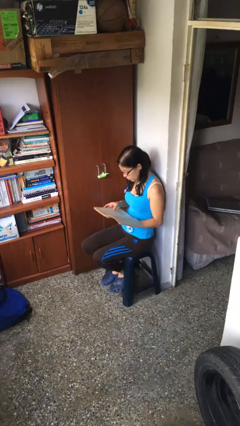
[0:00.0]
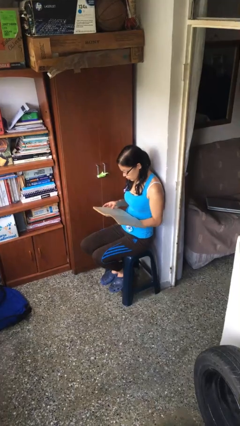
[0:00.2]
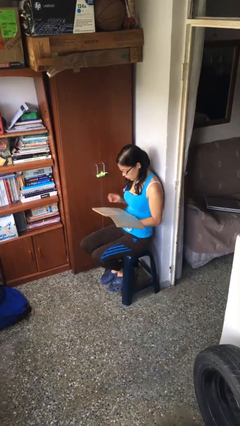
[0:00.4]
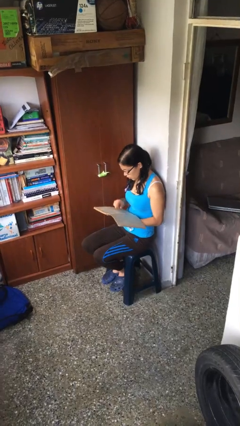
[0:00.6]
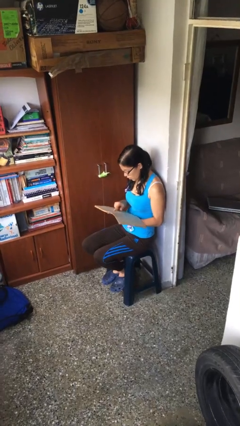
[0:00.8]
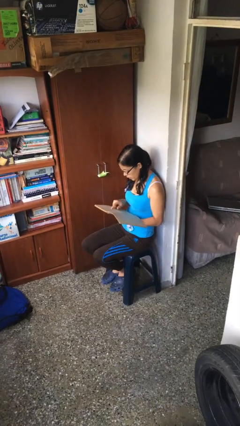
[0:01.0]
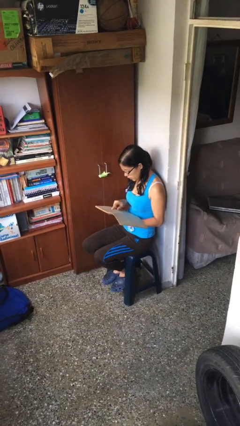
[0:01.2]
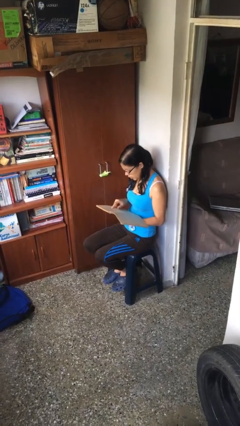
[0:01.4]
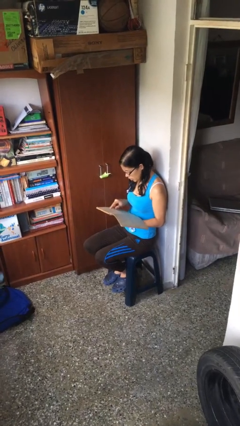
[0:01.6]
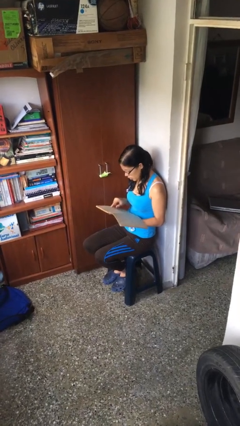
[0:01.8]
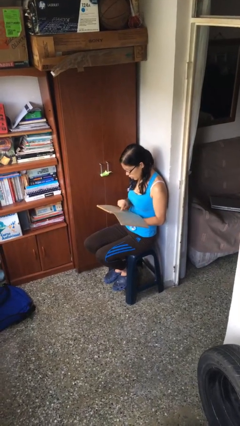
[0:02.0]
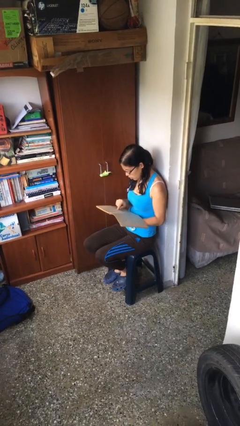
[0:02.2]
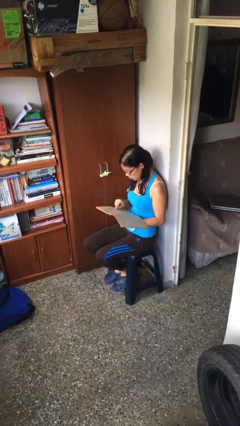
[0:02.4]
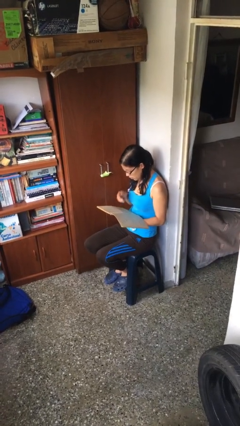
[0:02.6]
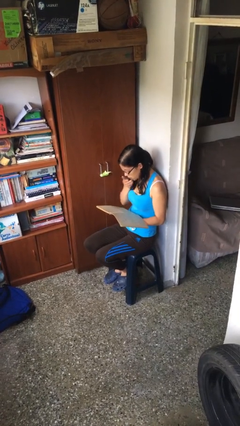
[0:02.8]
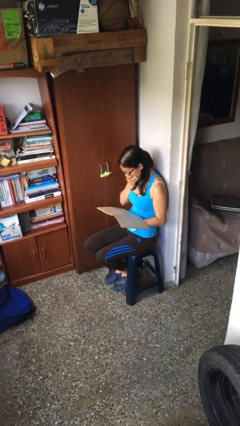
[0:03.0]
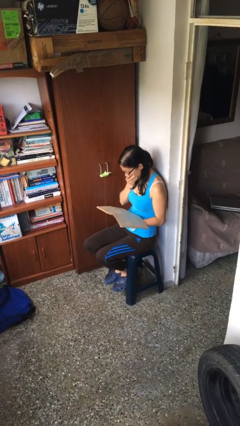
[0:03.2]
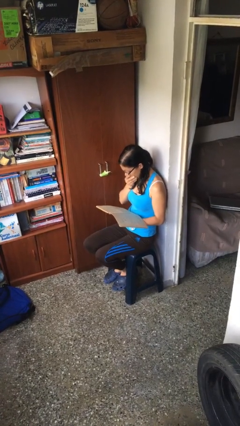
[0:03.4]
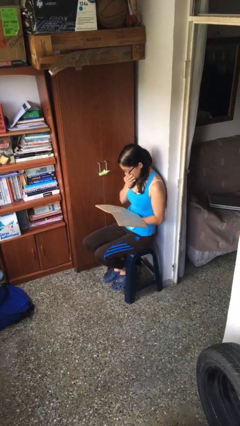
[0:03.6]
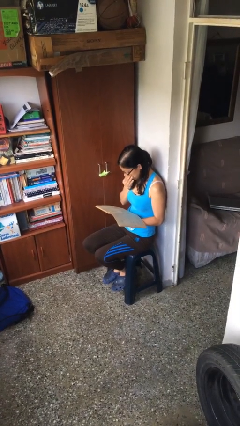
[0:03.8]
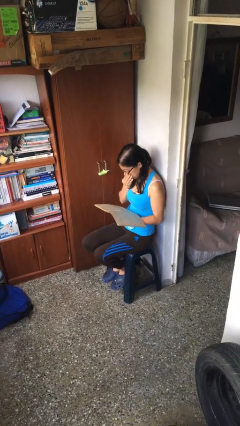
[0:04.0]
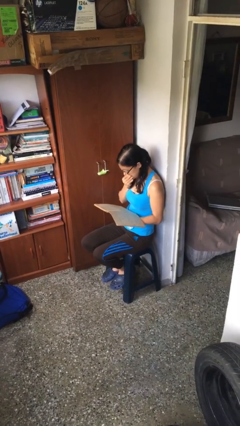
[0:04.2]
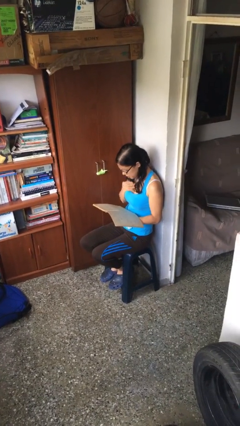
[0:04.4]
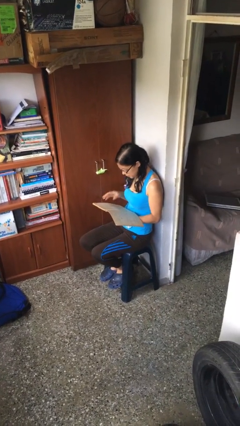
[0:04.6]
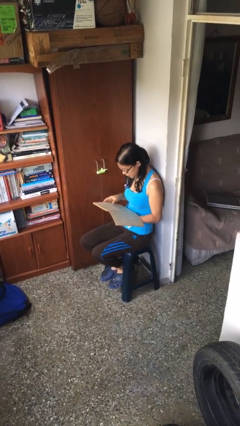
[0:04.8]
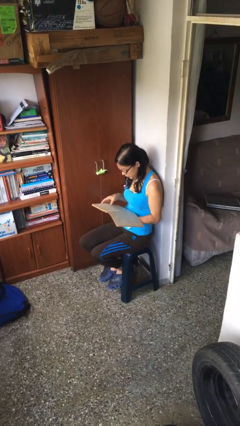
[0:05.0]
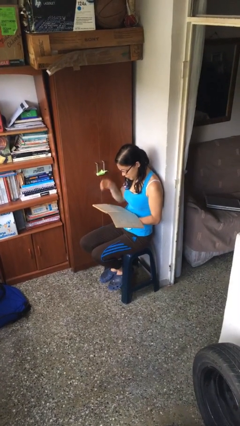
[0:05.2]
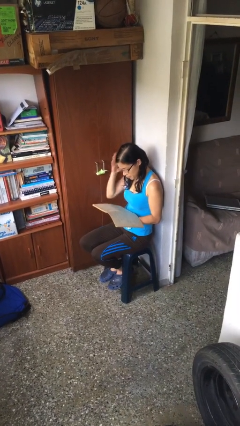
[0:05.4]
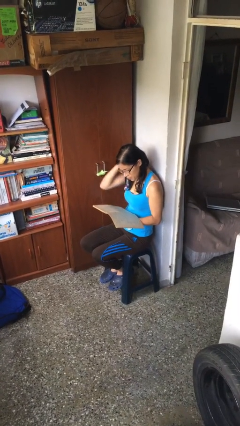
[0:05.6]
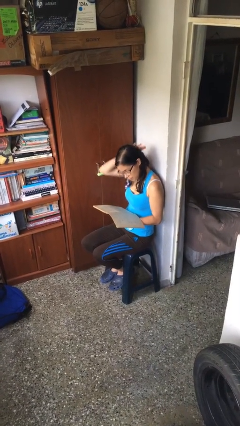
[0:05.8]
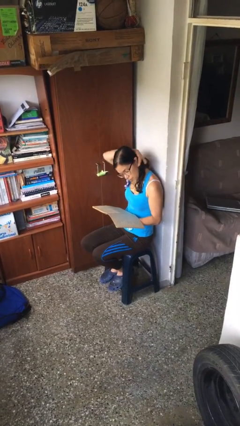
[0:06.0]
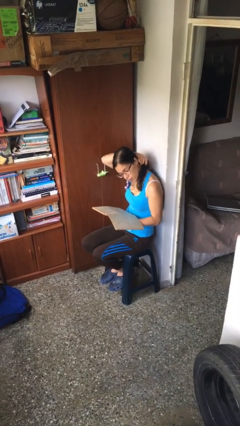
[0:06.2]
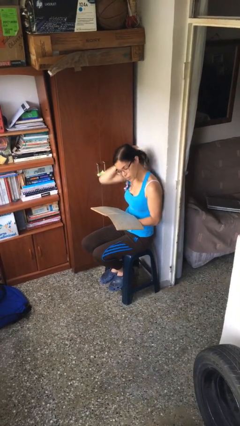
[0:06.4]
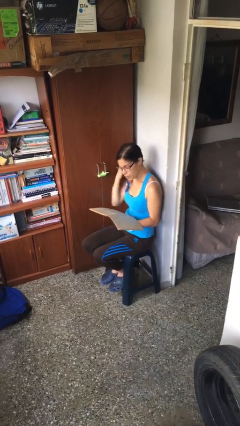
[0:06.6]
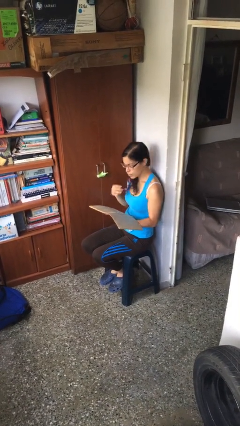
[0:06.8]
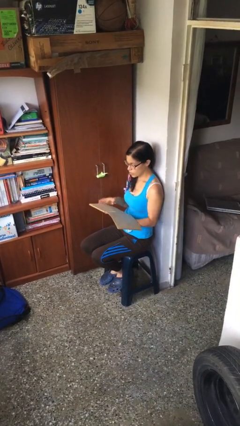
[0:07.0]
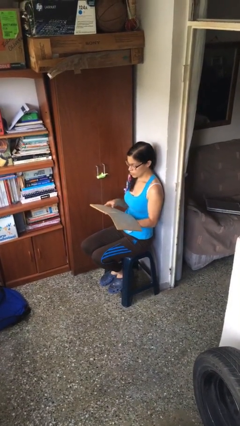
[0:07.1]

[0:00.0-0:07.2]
person reads document

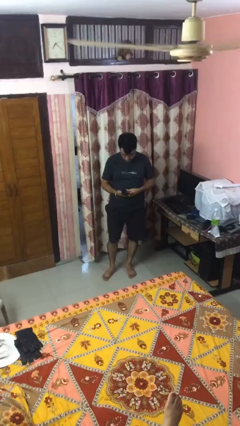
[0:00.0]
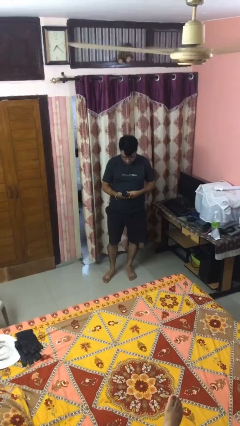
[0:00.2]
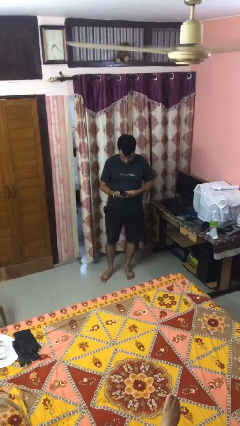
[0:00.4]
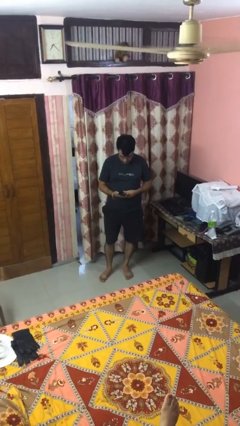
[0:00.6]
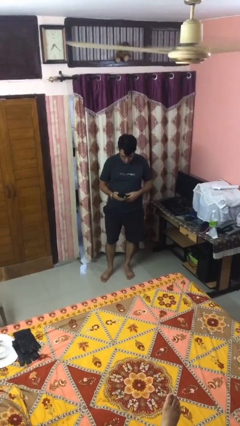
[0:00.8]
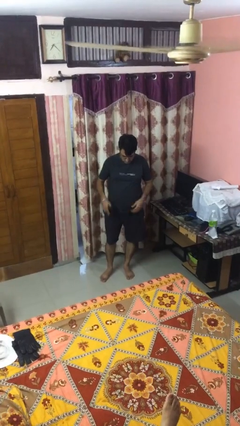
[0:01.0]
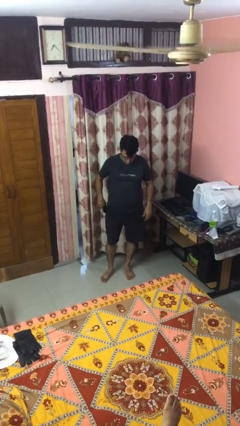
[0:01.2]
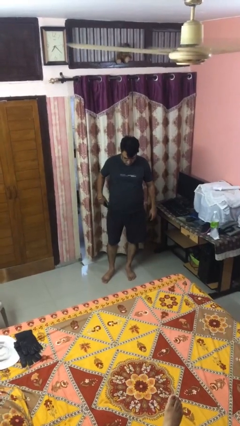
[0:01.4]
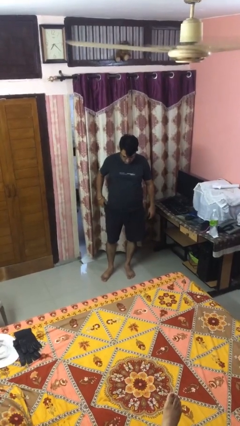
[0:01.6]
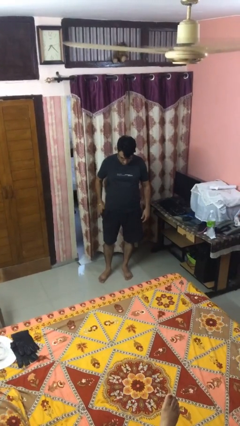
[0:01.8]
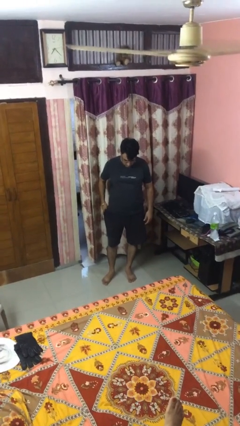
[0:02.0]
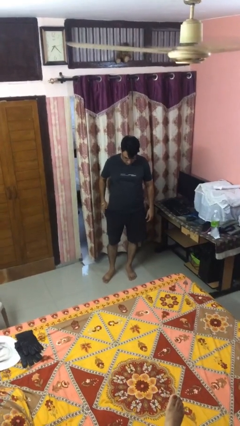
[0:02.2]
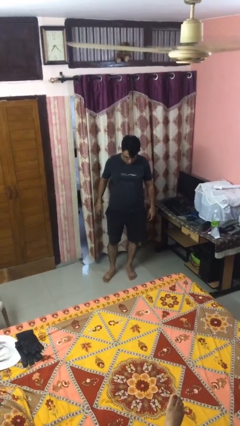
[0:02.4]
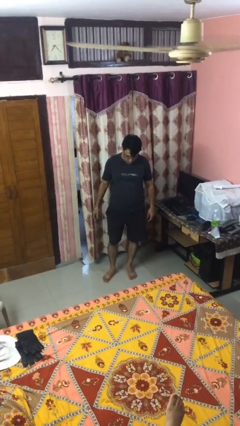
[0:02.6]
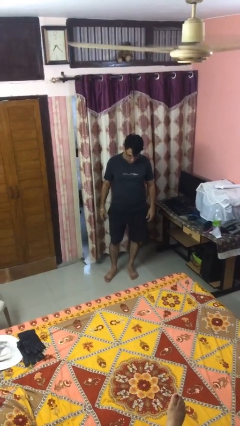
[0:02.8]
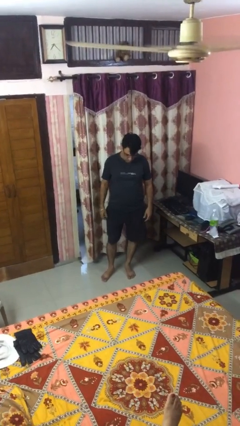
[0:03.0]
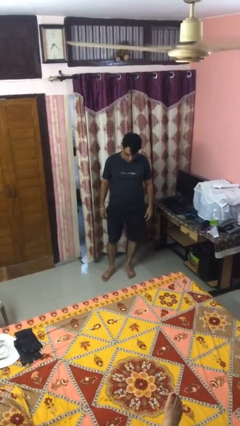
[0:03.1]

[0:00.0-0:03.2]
person puts phone into pocket

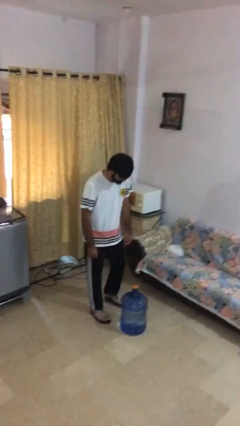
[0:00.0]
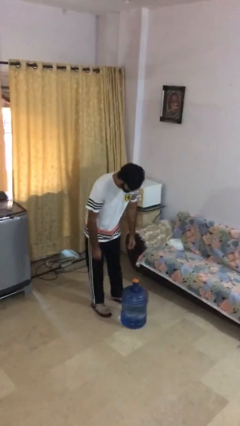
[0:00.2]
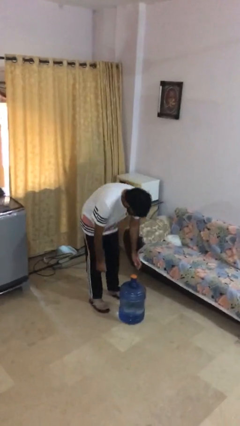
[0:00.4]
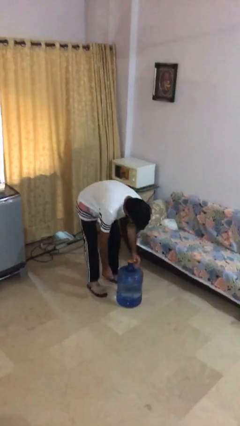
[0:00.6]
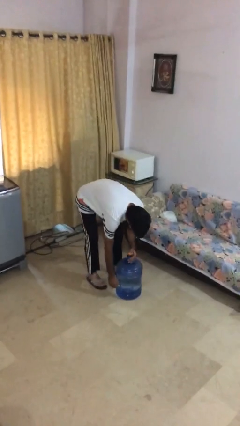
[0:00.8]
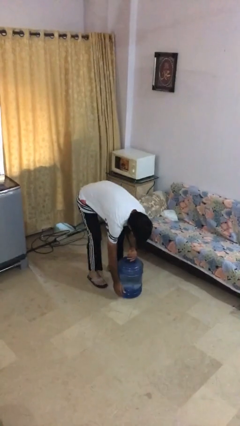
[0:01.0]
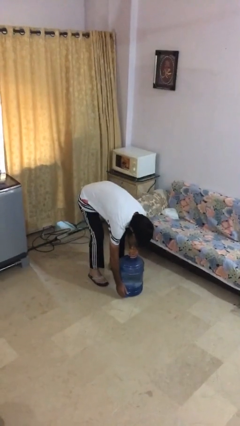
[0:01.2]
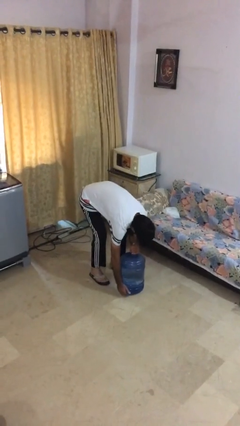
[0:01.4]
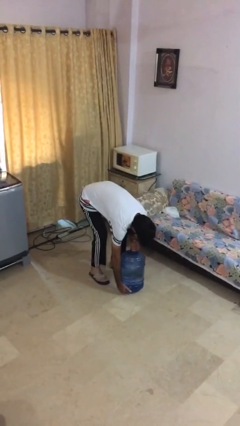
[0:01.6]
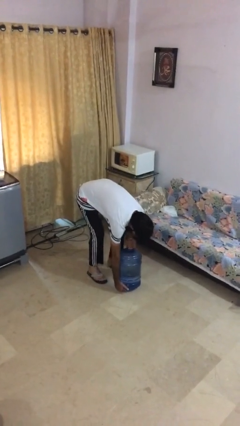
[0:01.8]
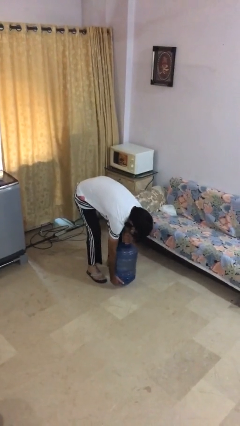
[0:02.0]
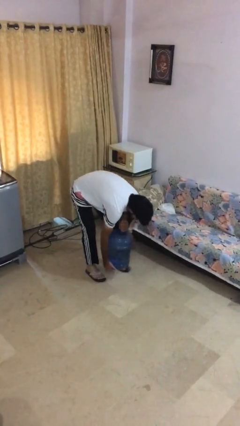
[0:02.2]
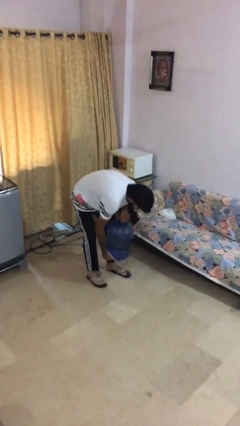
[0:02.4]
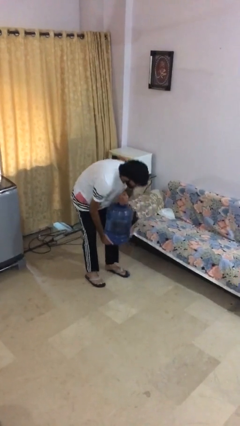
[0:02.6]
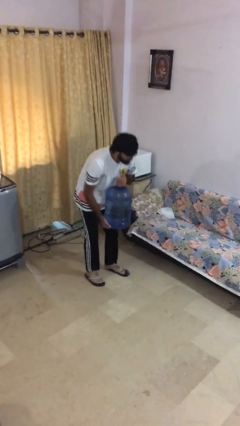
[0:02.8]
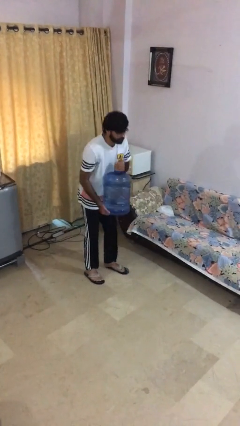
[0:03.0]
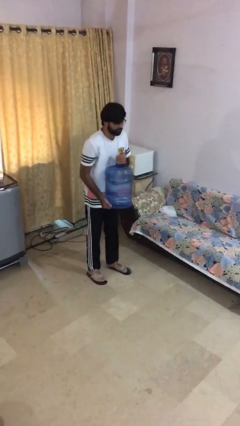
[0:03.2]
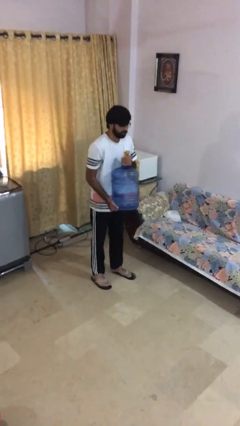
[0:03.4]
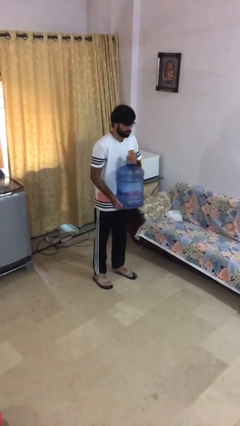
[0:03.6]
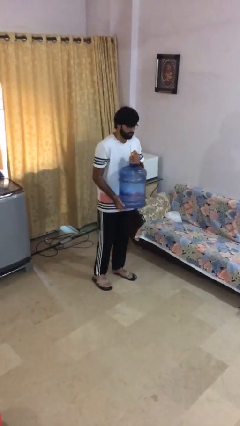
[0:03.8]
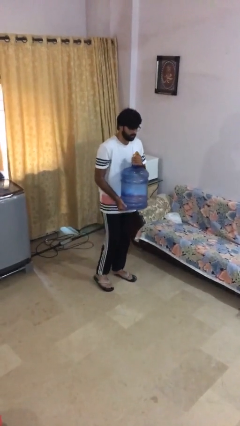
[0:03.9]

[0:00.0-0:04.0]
person picks up object from floor

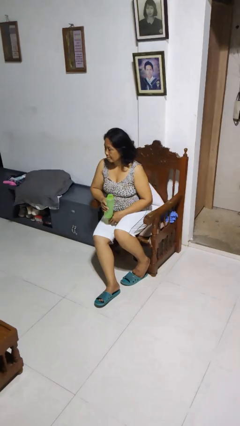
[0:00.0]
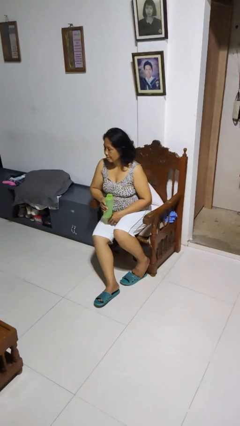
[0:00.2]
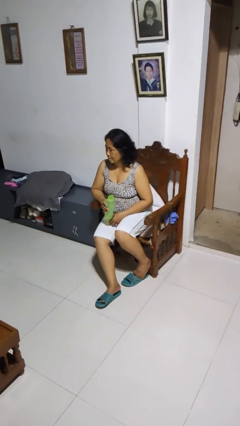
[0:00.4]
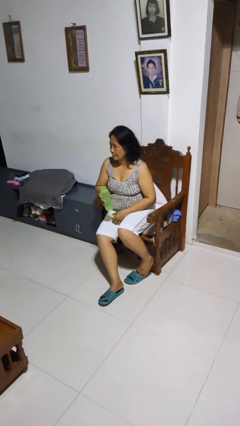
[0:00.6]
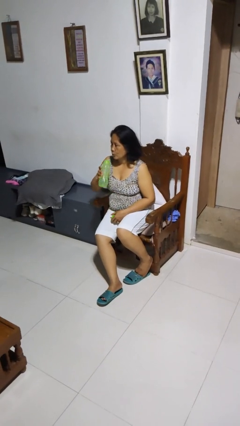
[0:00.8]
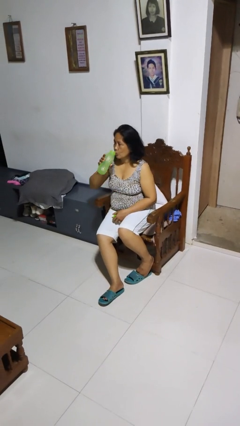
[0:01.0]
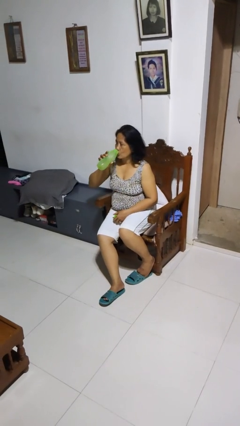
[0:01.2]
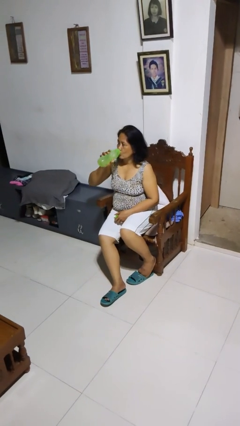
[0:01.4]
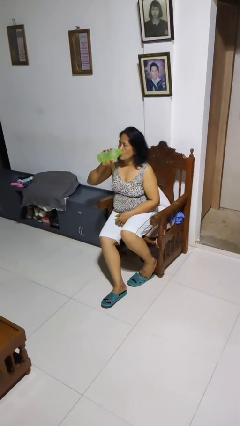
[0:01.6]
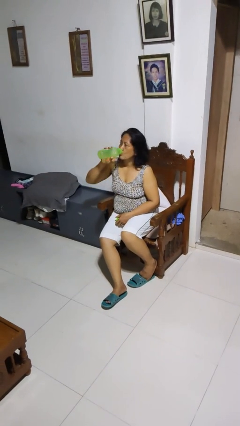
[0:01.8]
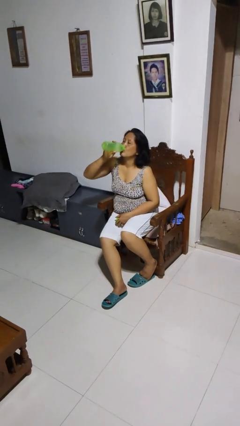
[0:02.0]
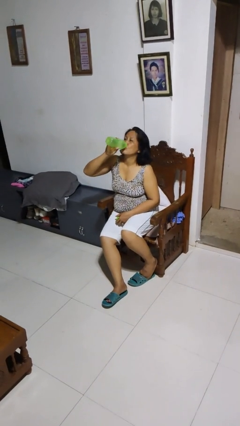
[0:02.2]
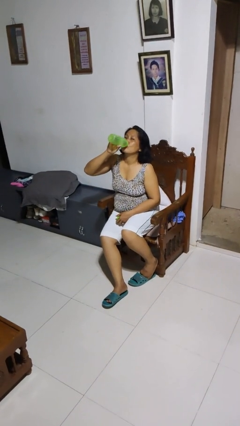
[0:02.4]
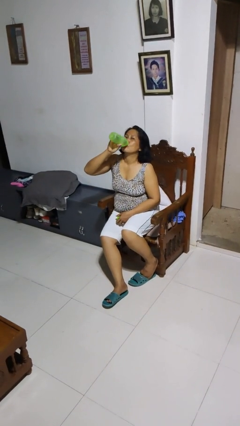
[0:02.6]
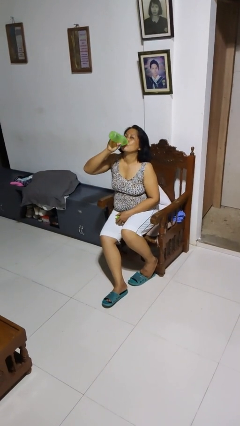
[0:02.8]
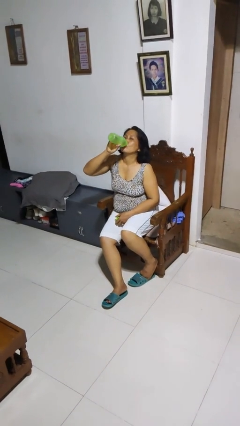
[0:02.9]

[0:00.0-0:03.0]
person drinks from bottle

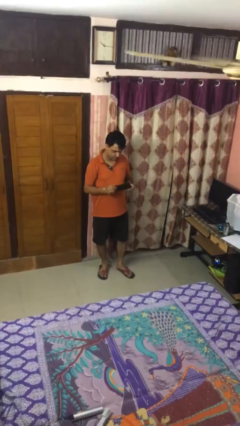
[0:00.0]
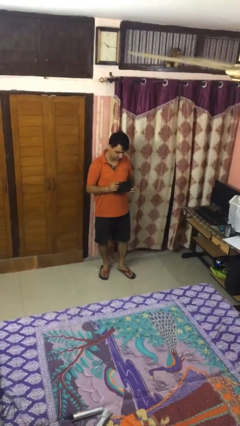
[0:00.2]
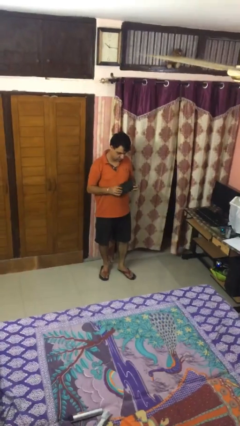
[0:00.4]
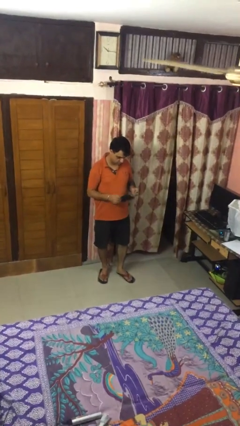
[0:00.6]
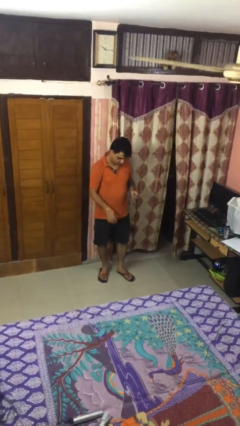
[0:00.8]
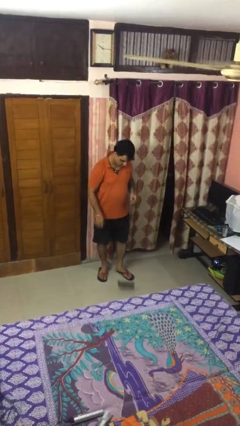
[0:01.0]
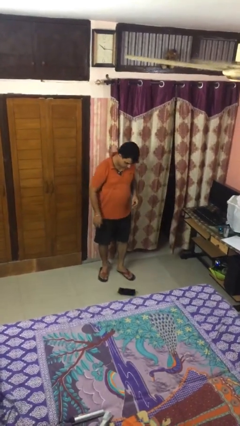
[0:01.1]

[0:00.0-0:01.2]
person drops object
